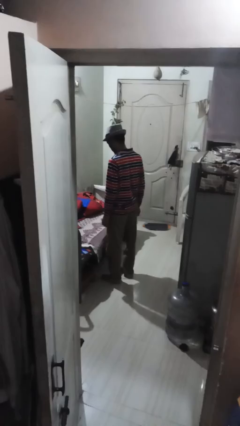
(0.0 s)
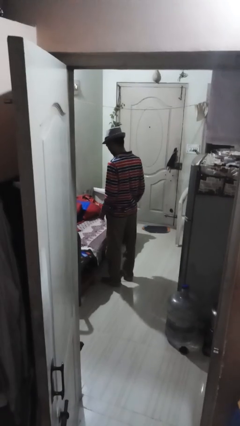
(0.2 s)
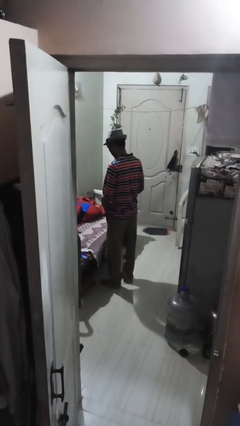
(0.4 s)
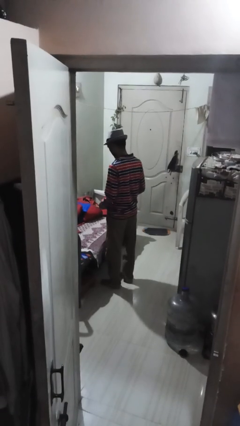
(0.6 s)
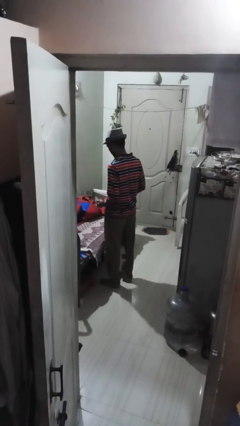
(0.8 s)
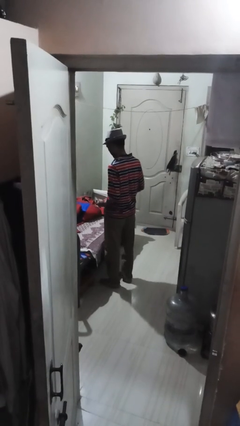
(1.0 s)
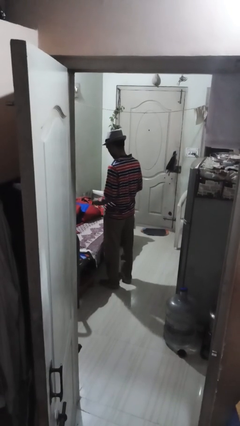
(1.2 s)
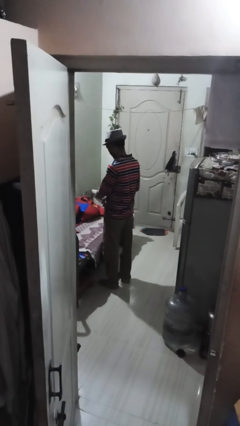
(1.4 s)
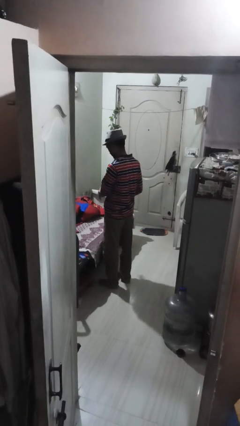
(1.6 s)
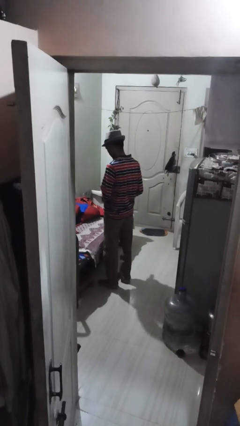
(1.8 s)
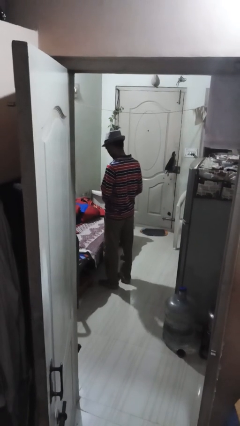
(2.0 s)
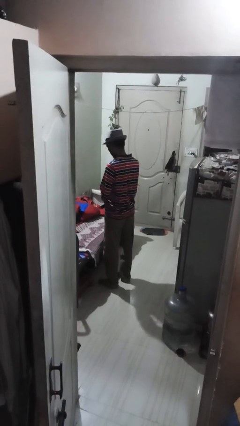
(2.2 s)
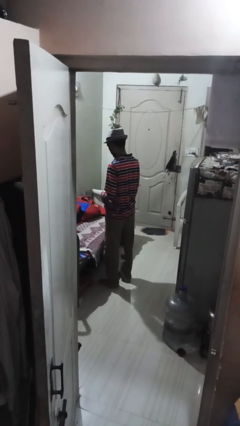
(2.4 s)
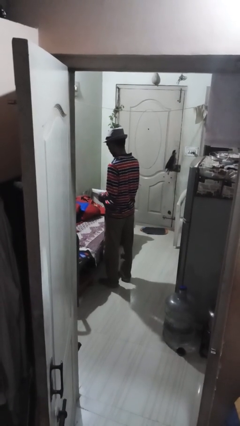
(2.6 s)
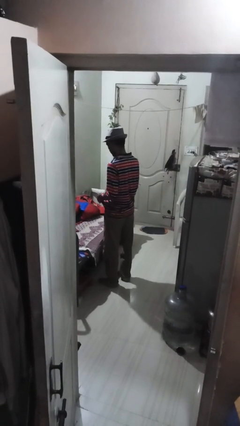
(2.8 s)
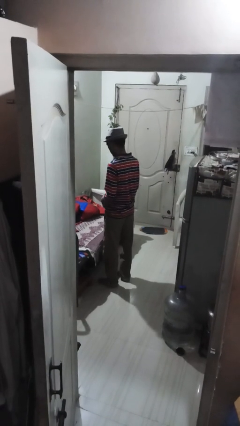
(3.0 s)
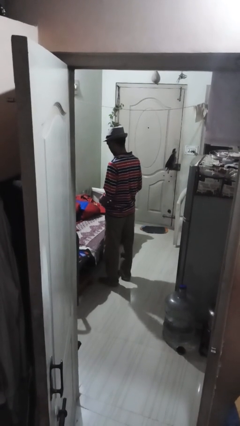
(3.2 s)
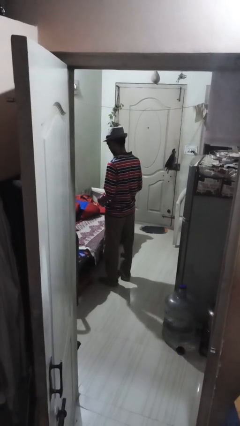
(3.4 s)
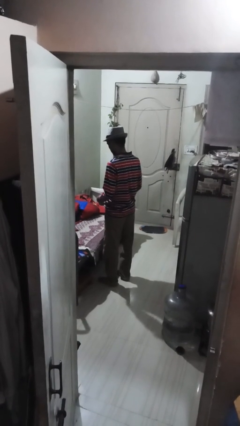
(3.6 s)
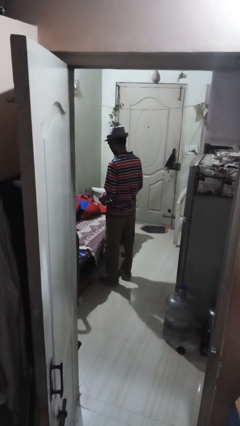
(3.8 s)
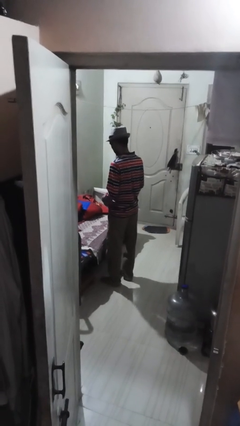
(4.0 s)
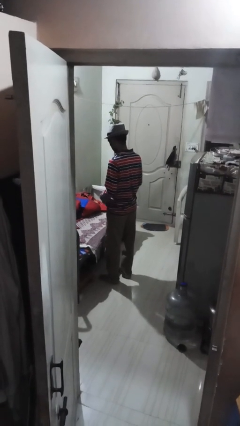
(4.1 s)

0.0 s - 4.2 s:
person puts on belt

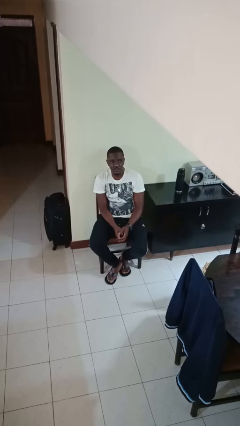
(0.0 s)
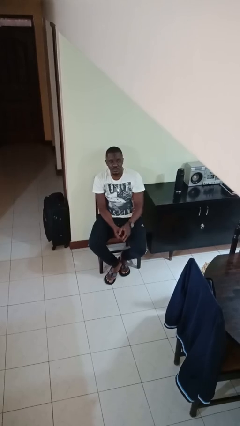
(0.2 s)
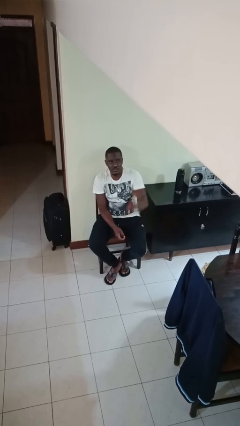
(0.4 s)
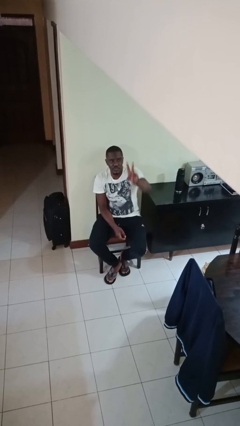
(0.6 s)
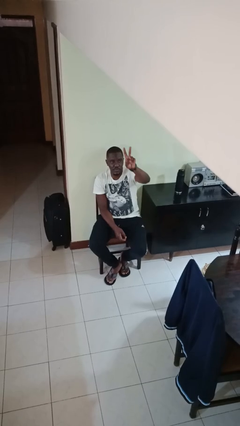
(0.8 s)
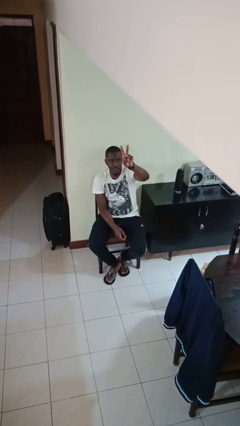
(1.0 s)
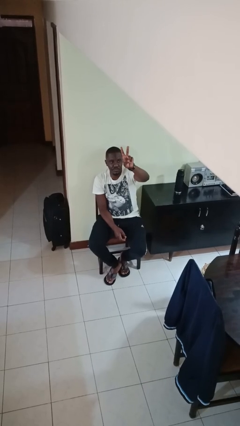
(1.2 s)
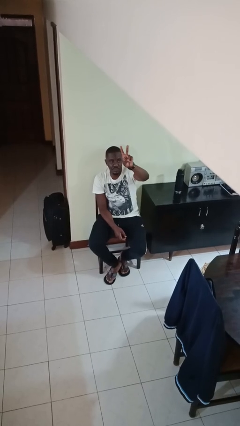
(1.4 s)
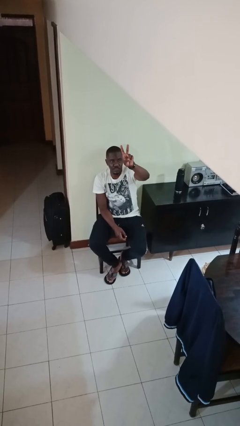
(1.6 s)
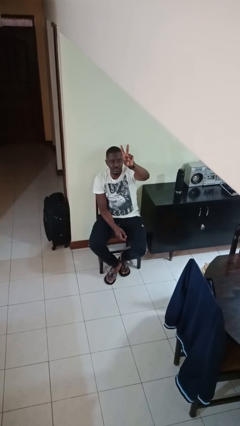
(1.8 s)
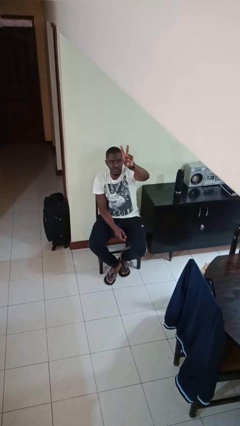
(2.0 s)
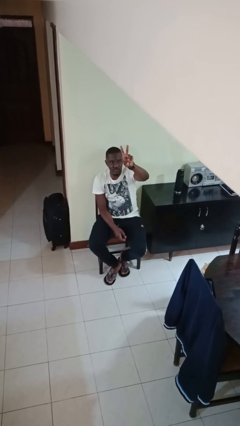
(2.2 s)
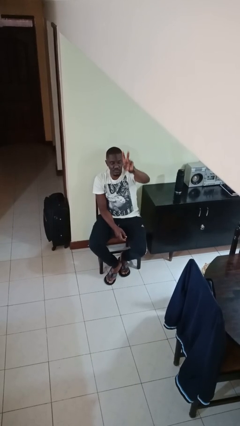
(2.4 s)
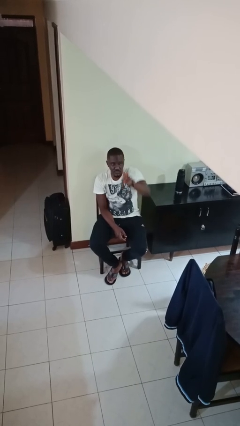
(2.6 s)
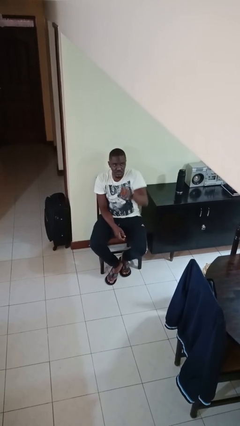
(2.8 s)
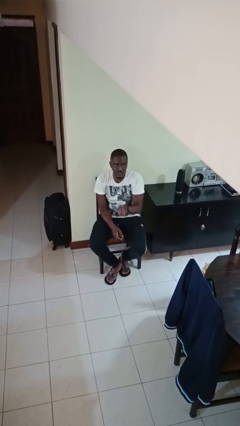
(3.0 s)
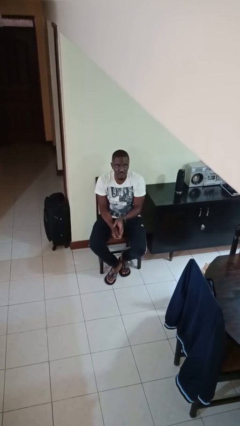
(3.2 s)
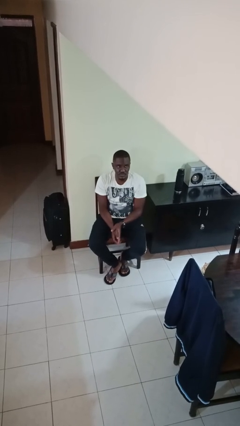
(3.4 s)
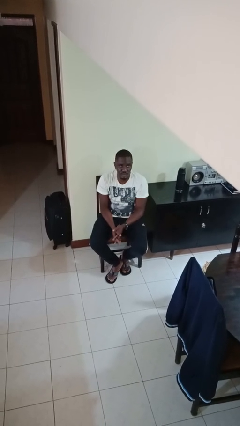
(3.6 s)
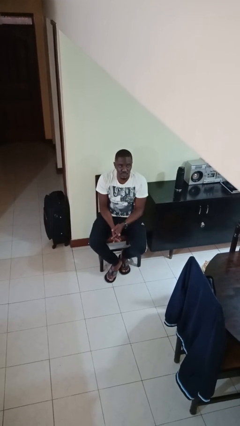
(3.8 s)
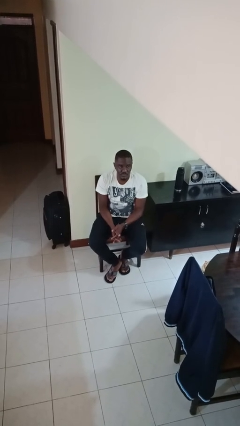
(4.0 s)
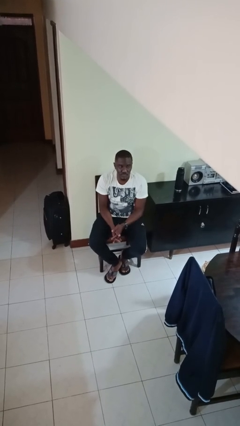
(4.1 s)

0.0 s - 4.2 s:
person gestures peace

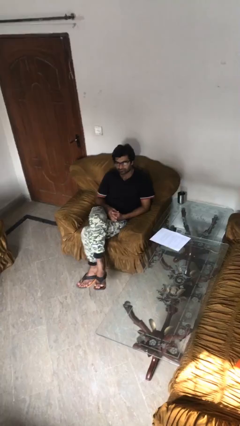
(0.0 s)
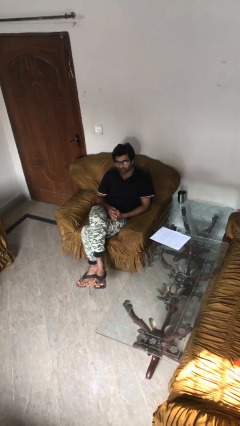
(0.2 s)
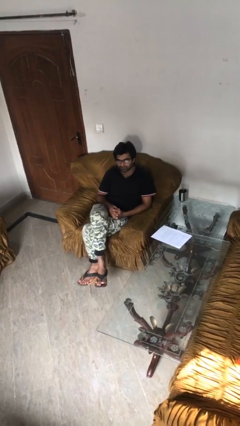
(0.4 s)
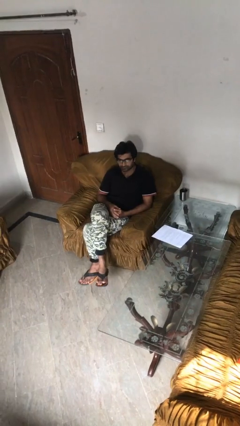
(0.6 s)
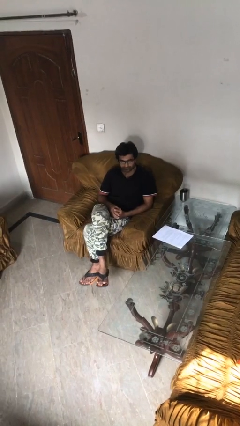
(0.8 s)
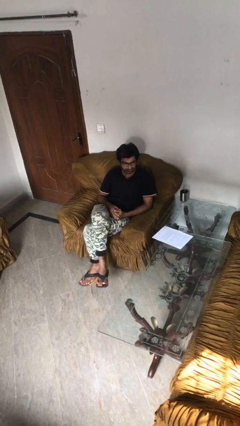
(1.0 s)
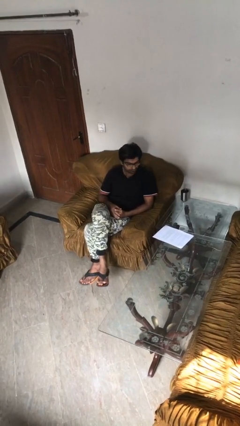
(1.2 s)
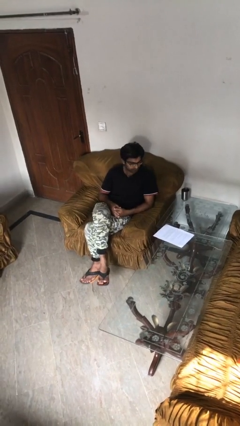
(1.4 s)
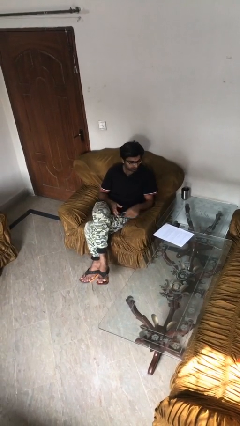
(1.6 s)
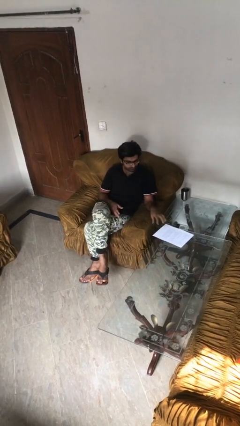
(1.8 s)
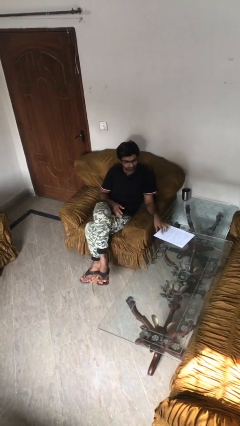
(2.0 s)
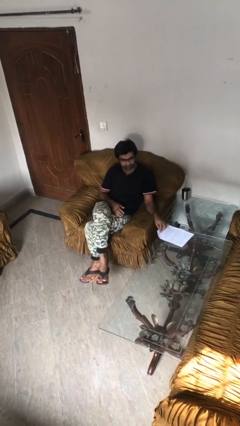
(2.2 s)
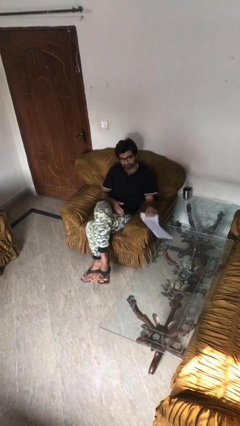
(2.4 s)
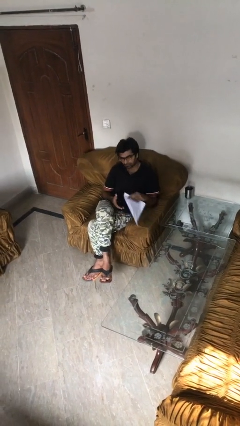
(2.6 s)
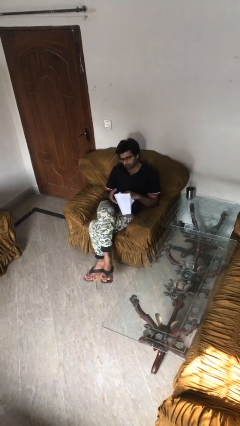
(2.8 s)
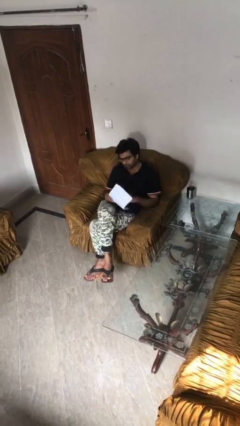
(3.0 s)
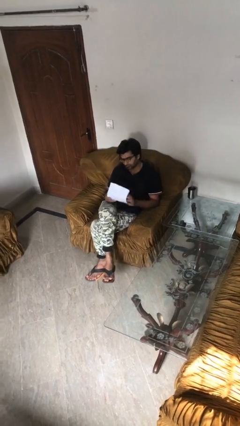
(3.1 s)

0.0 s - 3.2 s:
person picks up object from table

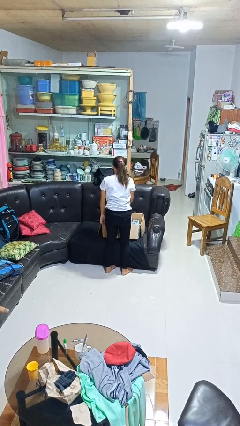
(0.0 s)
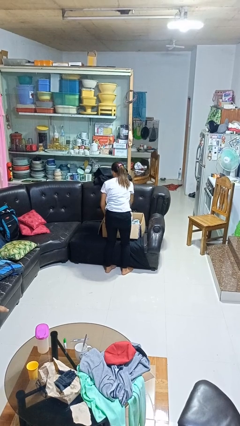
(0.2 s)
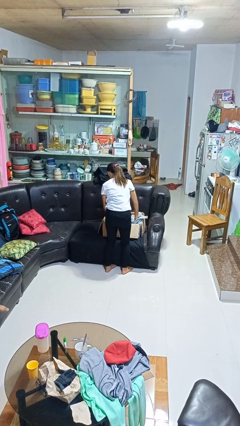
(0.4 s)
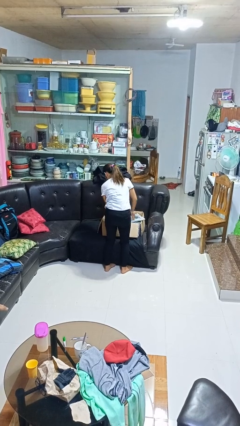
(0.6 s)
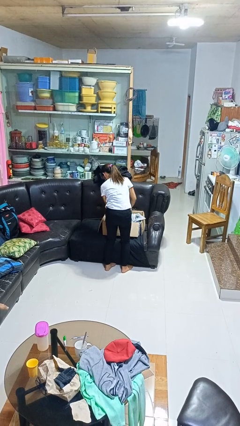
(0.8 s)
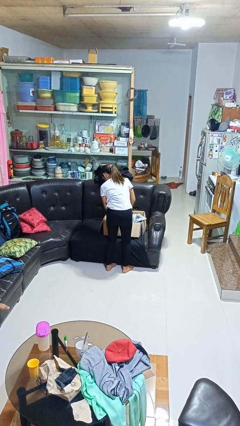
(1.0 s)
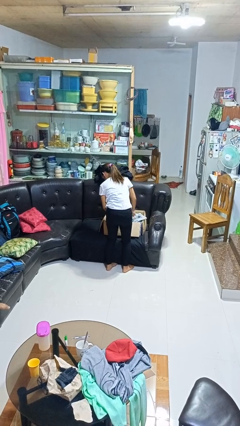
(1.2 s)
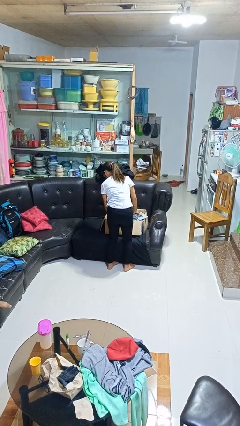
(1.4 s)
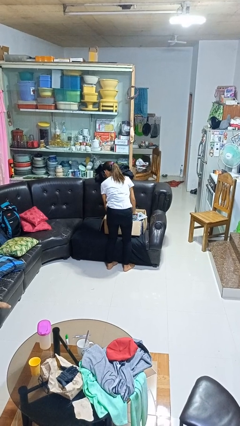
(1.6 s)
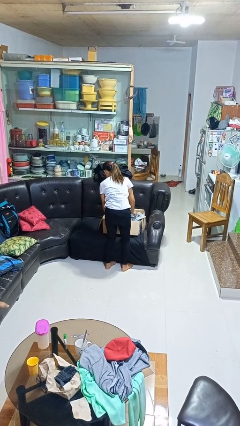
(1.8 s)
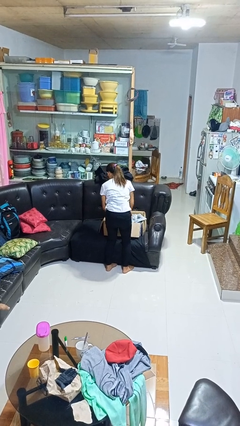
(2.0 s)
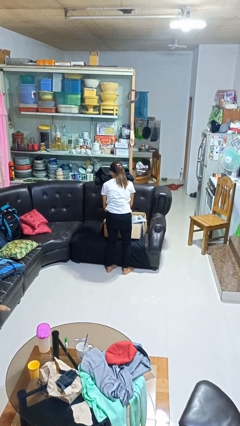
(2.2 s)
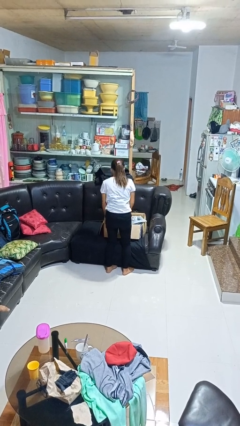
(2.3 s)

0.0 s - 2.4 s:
person searches in box

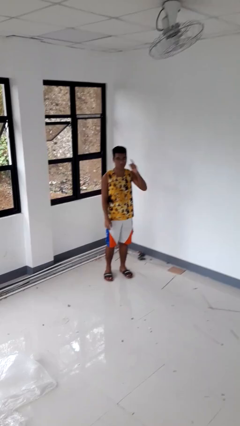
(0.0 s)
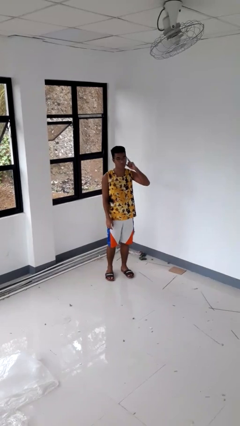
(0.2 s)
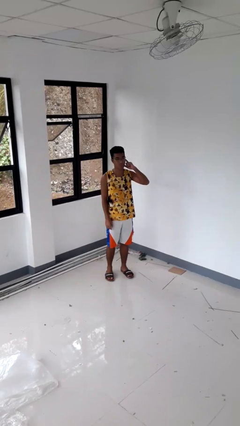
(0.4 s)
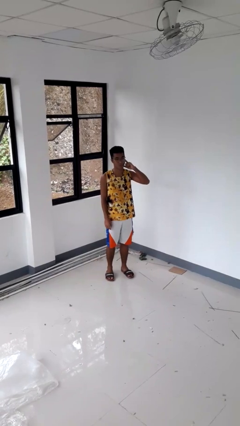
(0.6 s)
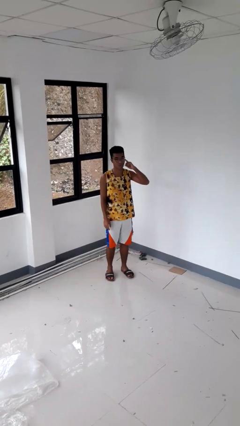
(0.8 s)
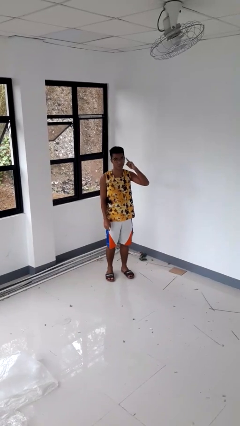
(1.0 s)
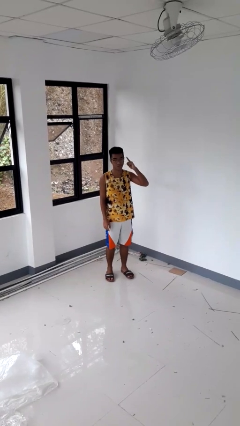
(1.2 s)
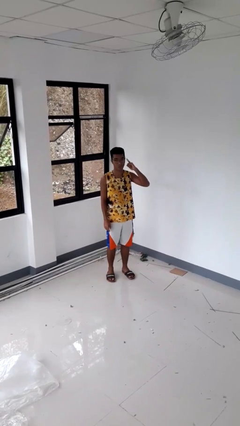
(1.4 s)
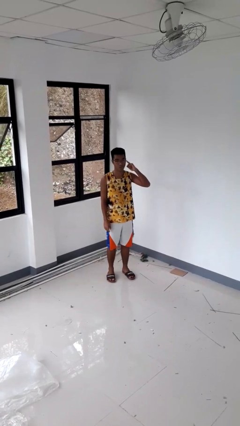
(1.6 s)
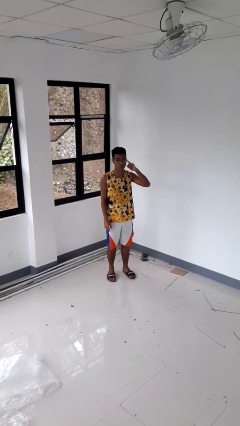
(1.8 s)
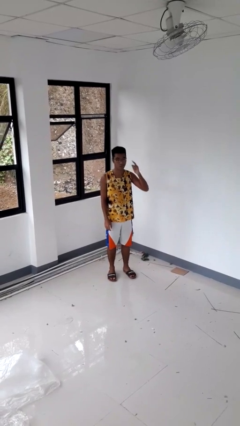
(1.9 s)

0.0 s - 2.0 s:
person gestures listen closely

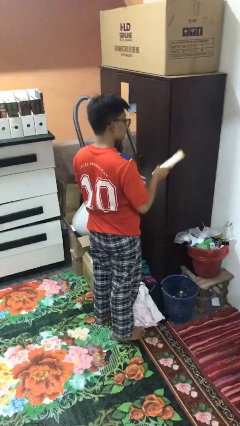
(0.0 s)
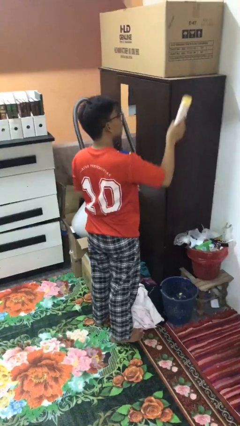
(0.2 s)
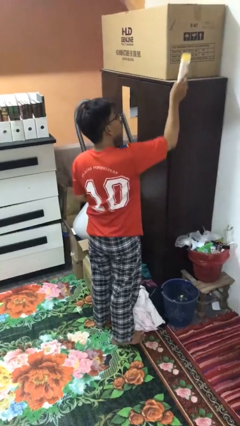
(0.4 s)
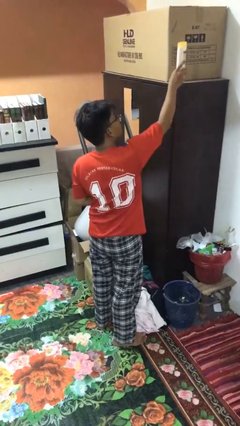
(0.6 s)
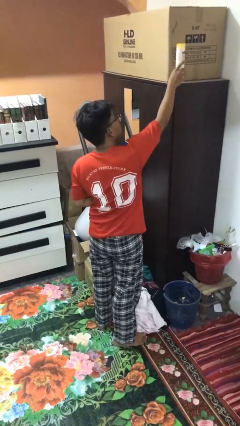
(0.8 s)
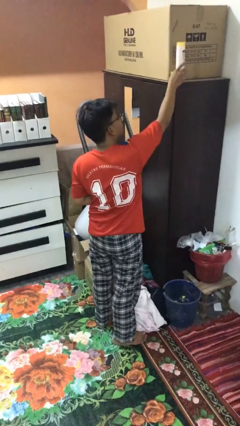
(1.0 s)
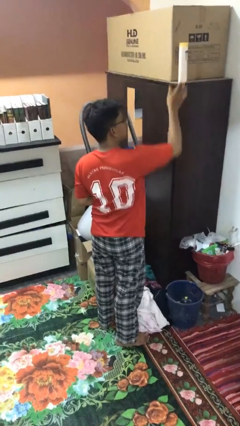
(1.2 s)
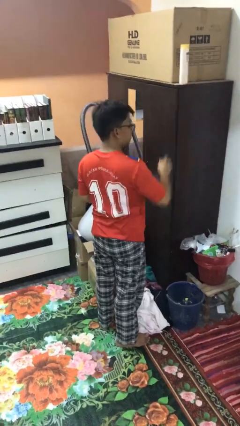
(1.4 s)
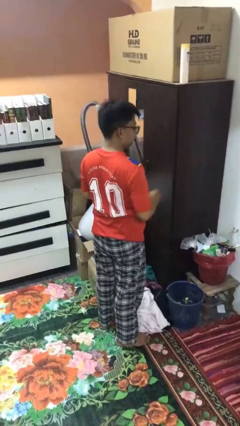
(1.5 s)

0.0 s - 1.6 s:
person puts down object on shelf
